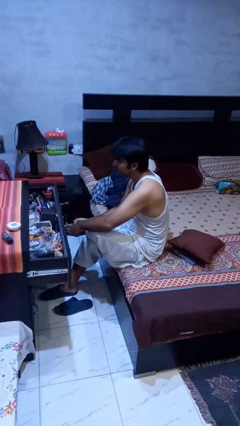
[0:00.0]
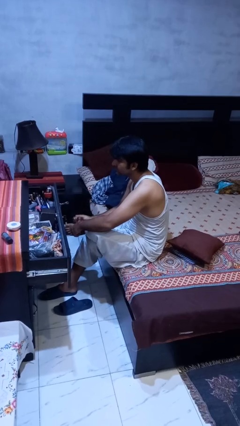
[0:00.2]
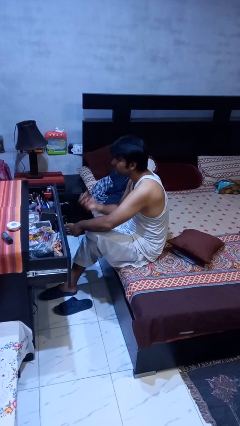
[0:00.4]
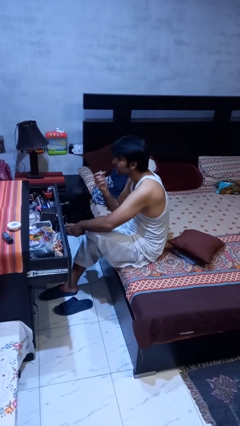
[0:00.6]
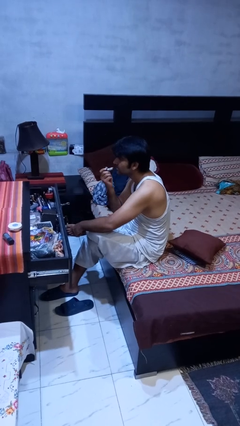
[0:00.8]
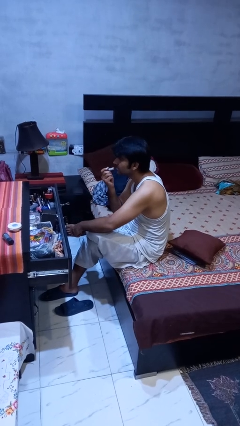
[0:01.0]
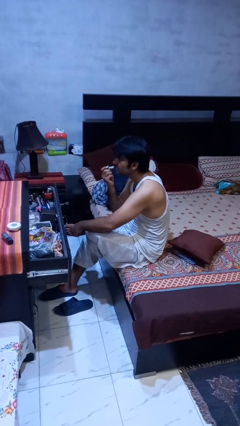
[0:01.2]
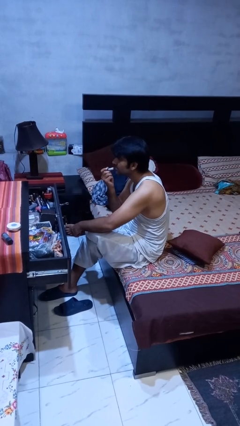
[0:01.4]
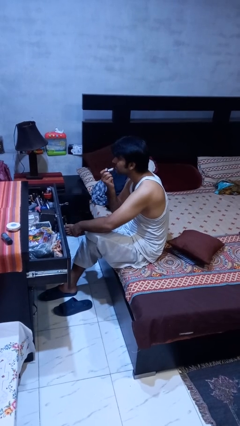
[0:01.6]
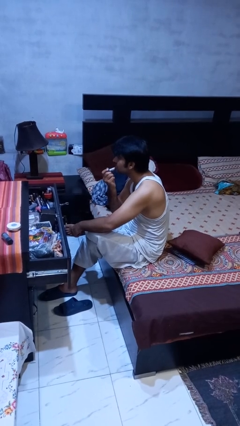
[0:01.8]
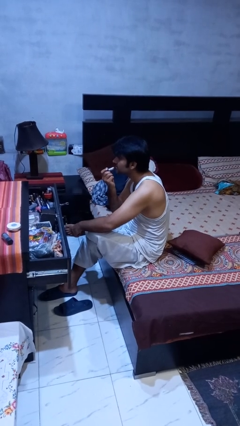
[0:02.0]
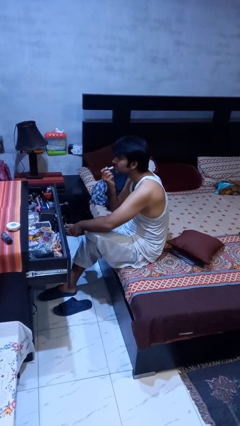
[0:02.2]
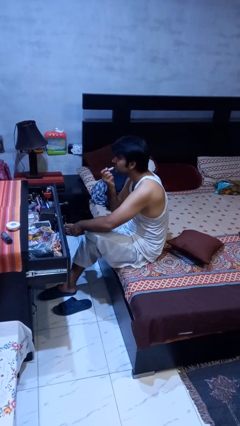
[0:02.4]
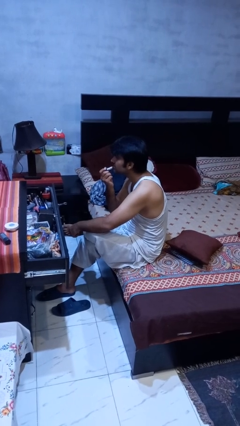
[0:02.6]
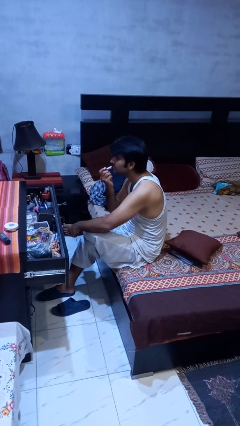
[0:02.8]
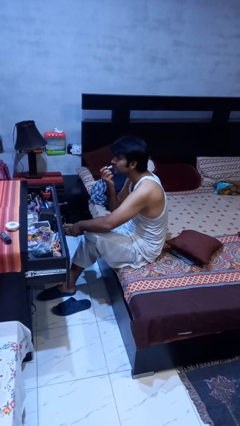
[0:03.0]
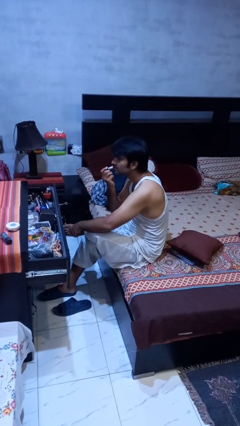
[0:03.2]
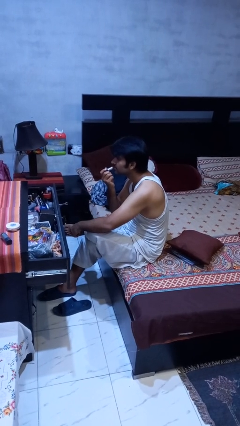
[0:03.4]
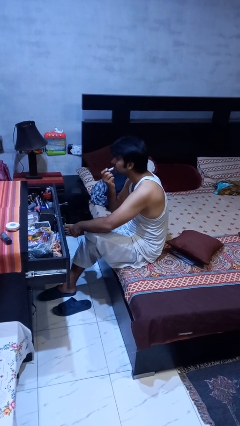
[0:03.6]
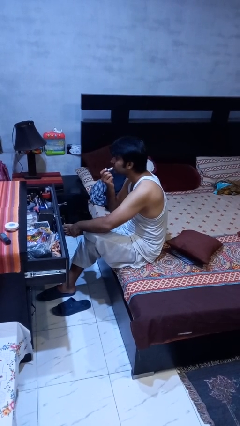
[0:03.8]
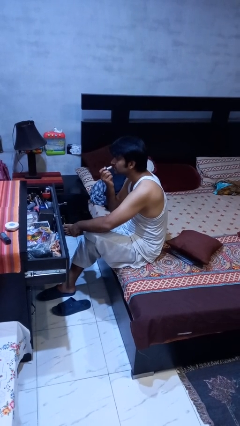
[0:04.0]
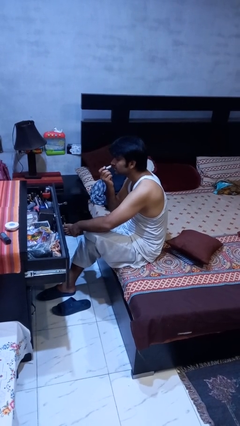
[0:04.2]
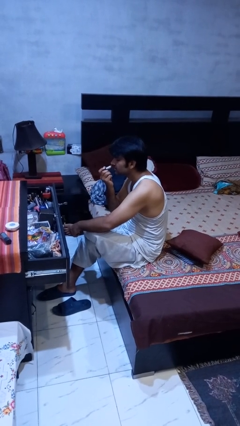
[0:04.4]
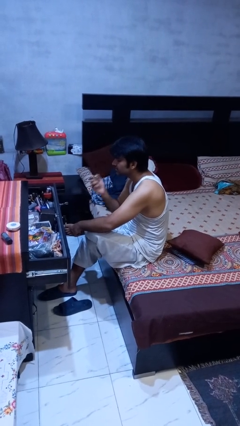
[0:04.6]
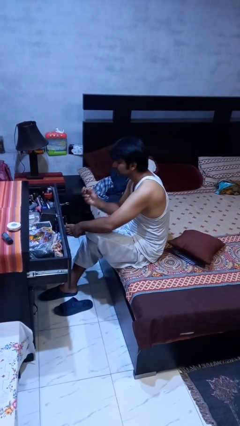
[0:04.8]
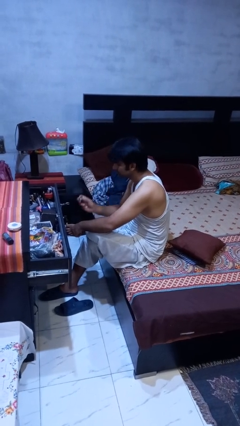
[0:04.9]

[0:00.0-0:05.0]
person applies lip makeup

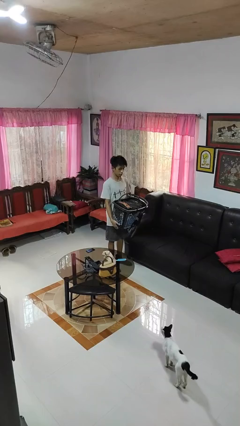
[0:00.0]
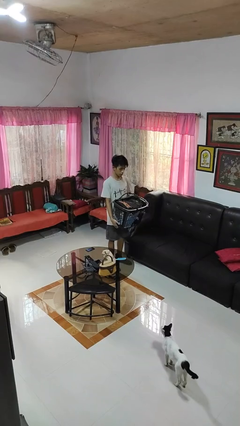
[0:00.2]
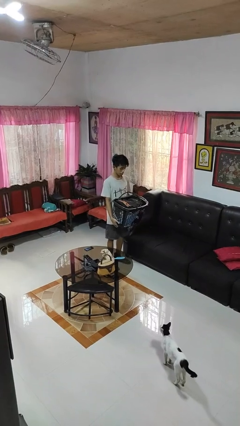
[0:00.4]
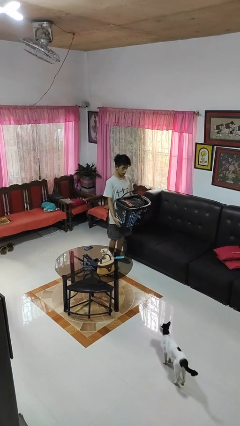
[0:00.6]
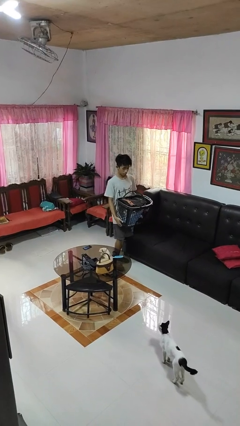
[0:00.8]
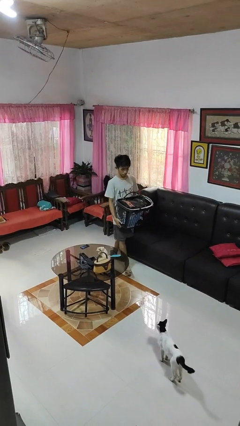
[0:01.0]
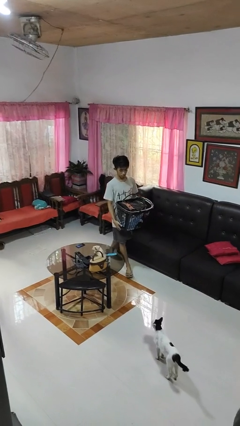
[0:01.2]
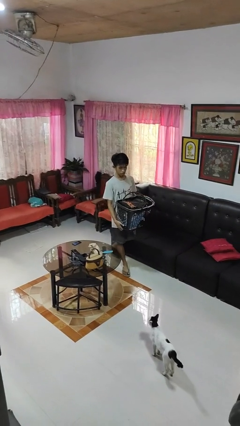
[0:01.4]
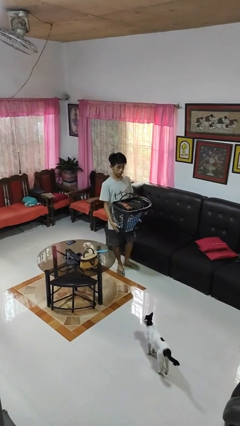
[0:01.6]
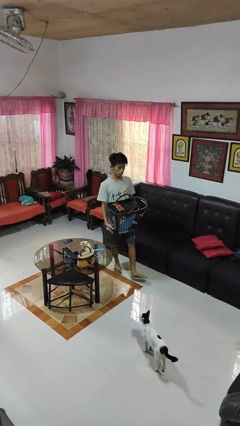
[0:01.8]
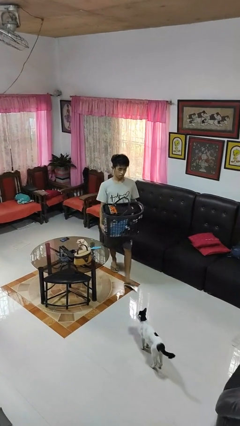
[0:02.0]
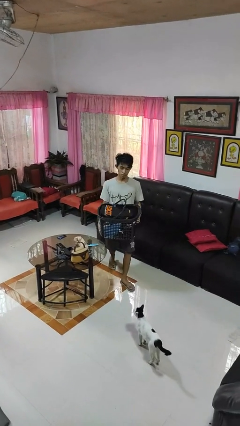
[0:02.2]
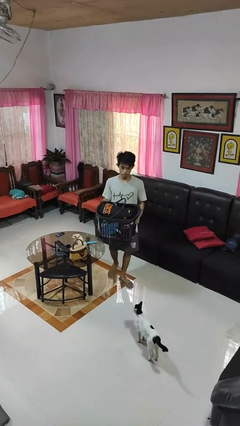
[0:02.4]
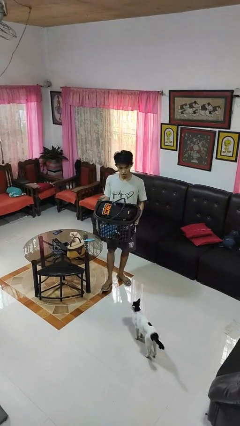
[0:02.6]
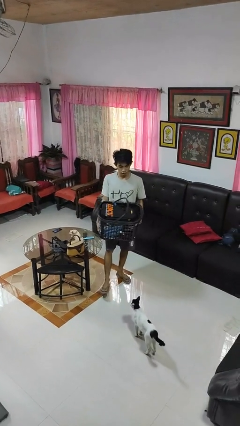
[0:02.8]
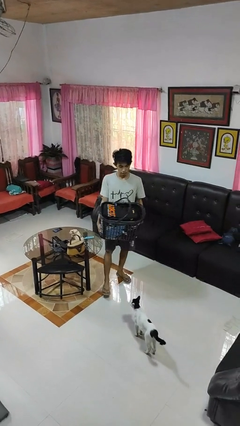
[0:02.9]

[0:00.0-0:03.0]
person carries laundry basket

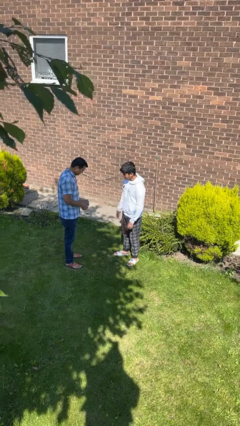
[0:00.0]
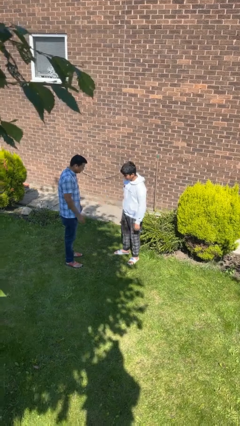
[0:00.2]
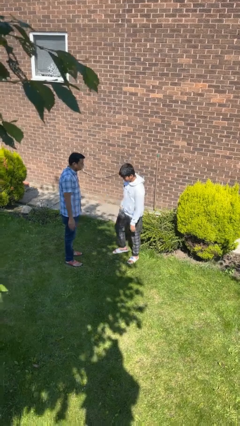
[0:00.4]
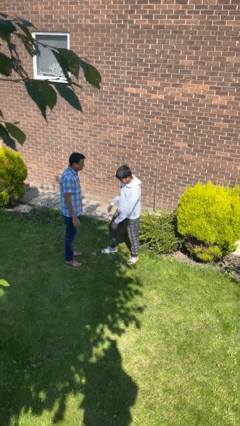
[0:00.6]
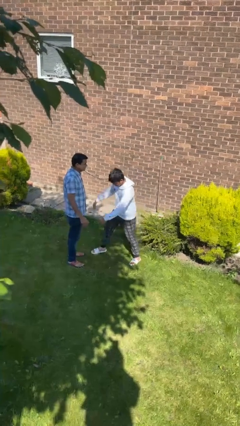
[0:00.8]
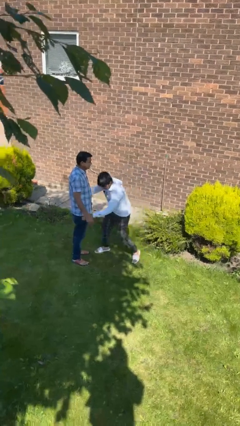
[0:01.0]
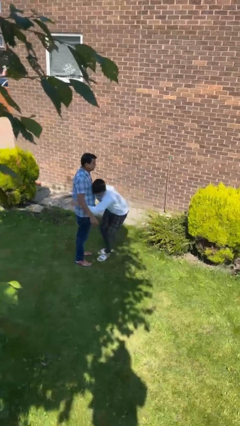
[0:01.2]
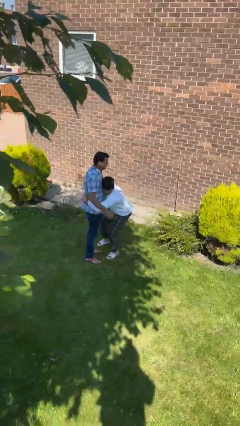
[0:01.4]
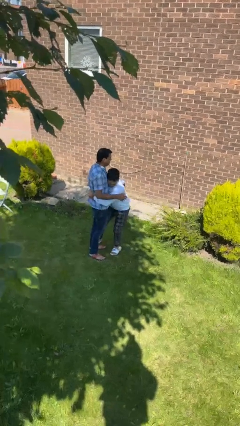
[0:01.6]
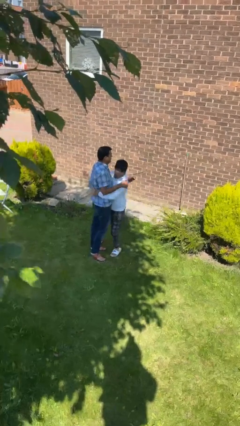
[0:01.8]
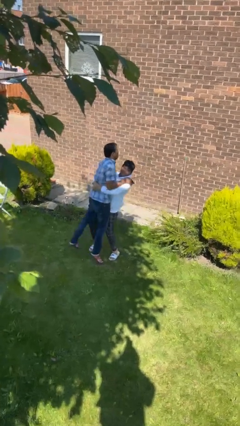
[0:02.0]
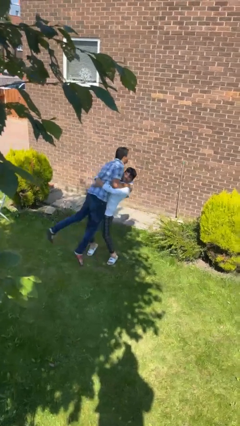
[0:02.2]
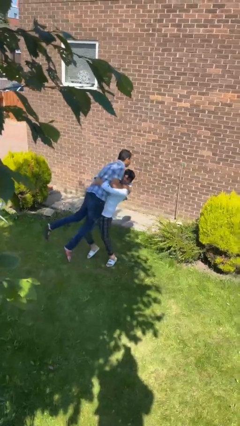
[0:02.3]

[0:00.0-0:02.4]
person picks up person

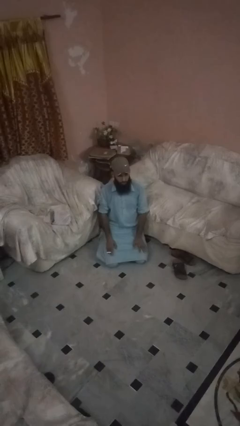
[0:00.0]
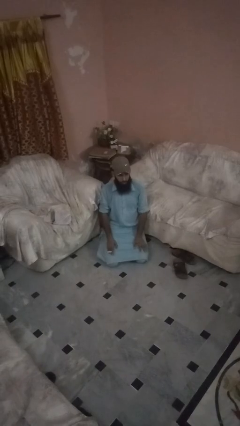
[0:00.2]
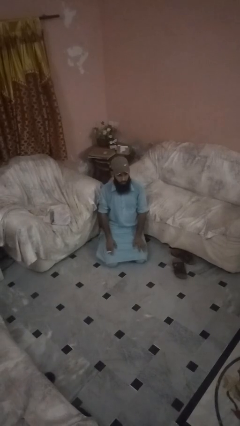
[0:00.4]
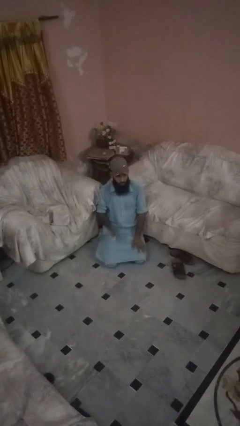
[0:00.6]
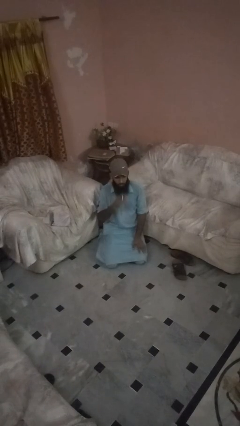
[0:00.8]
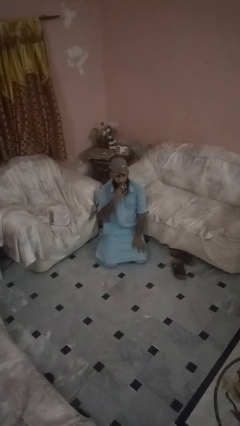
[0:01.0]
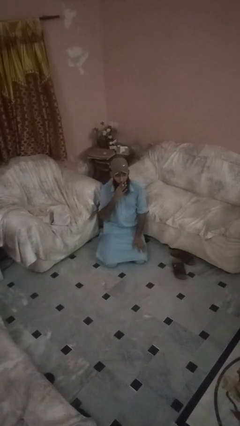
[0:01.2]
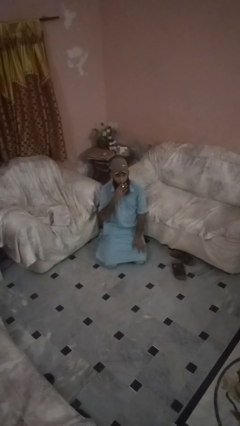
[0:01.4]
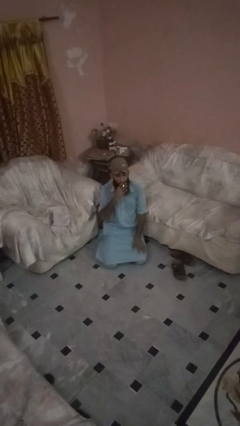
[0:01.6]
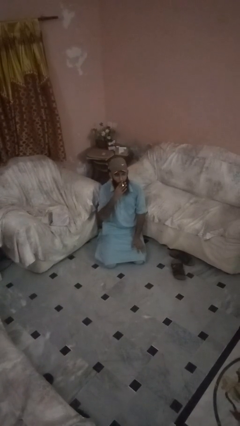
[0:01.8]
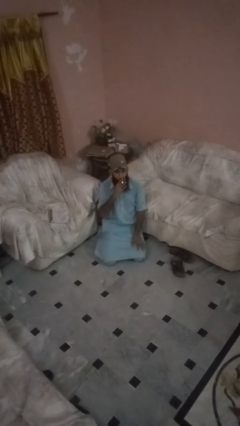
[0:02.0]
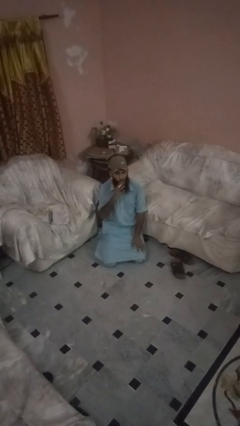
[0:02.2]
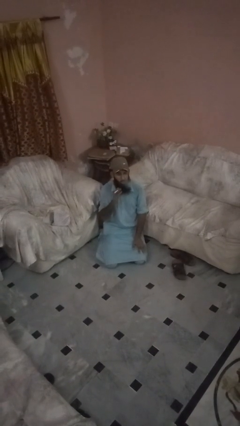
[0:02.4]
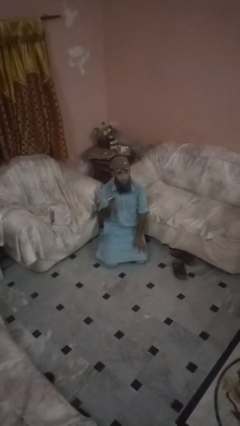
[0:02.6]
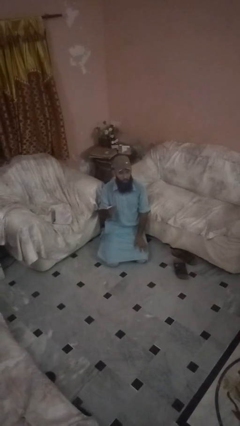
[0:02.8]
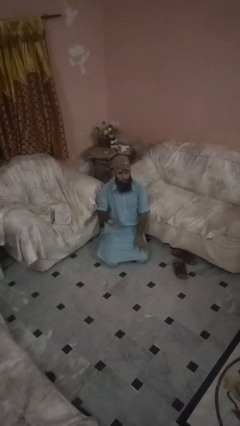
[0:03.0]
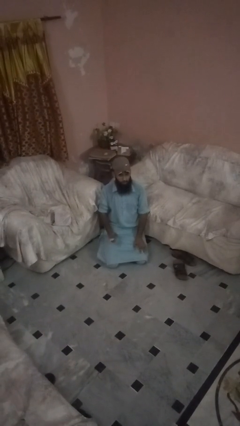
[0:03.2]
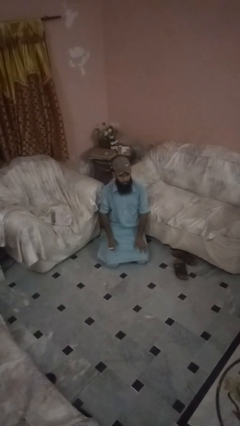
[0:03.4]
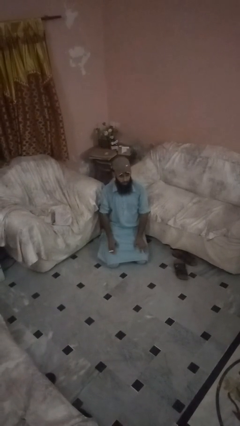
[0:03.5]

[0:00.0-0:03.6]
person vapes

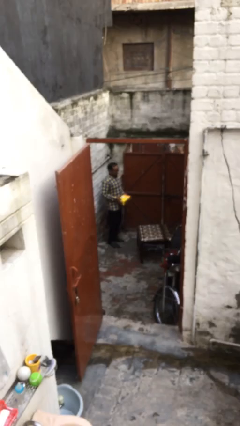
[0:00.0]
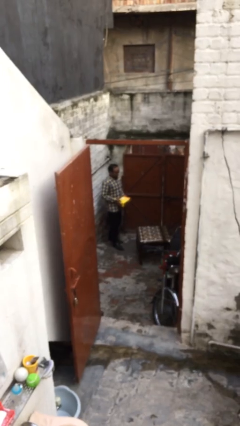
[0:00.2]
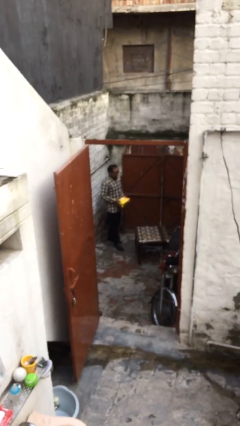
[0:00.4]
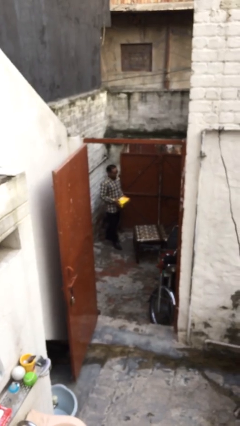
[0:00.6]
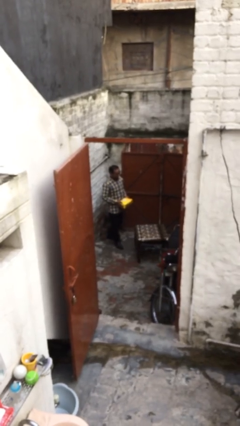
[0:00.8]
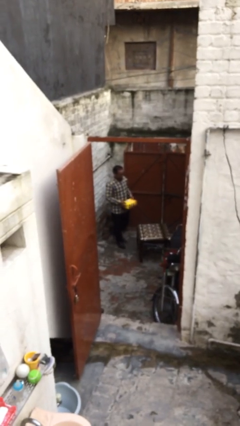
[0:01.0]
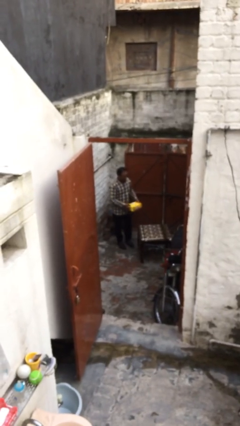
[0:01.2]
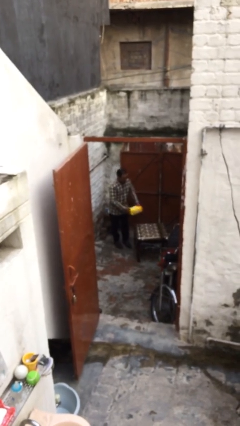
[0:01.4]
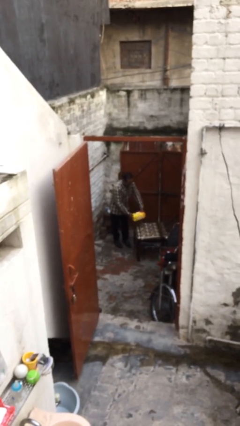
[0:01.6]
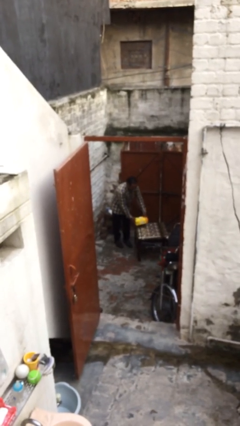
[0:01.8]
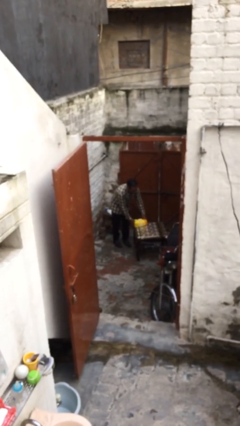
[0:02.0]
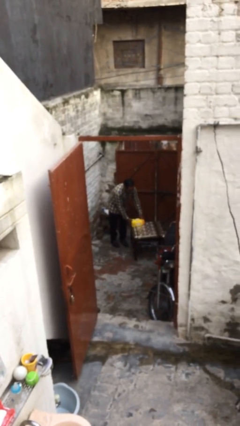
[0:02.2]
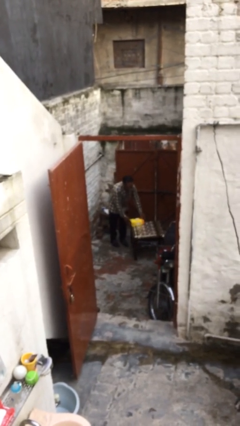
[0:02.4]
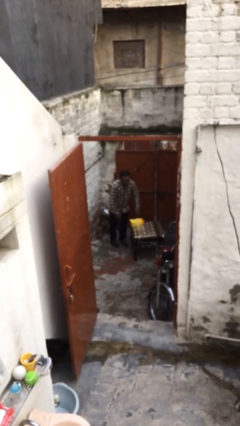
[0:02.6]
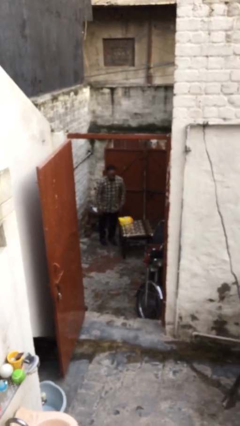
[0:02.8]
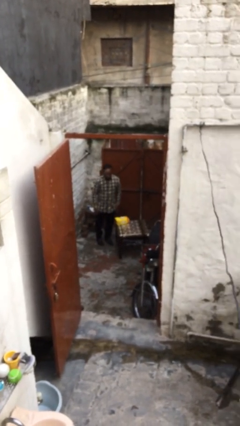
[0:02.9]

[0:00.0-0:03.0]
person puts down object on table

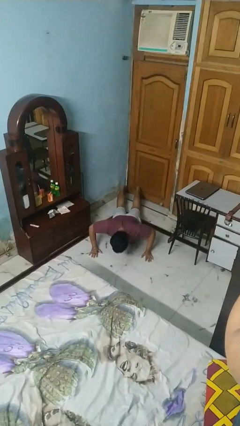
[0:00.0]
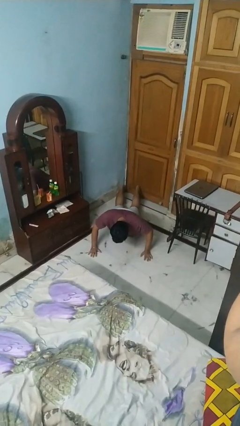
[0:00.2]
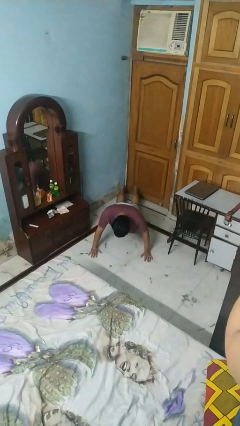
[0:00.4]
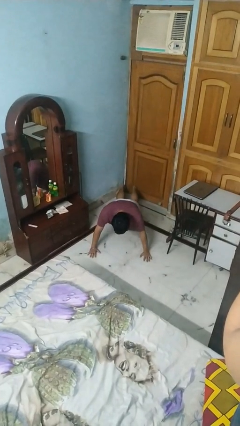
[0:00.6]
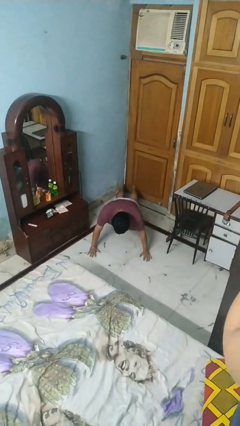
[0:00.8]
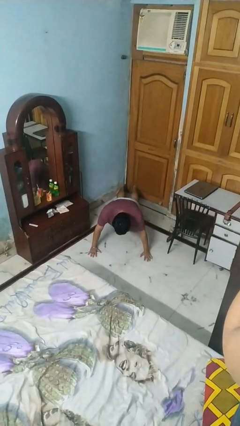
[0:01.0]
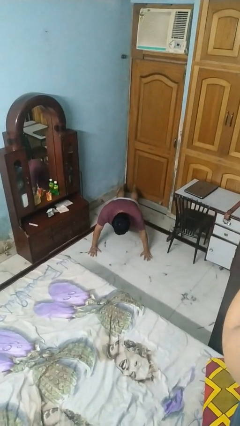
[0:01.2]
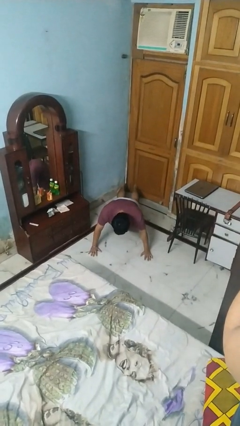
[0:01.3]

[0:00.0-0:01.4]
person exercises with pushup
